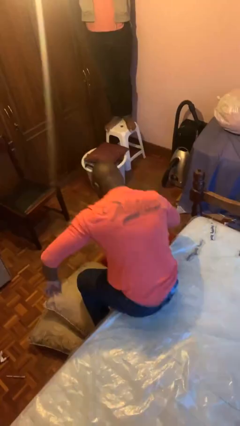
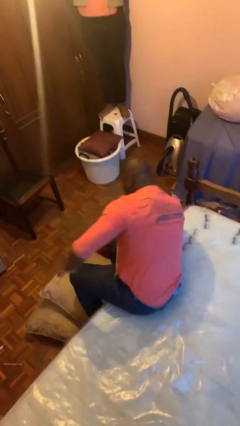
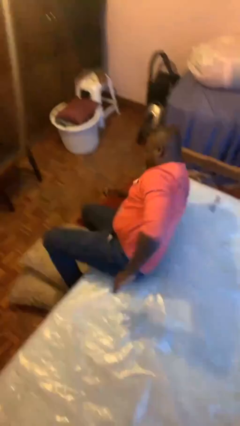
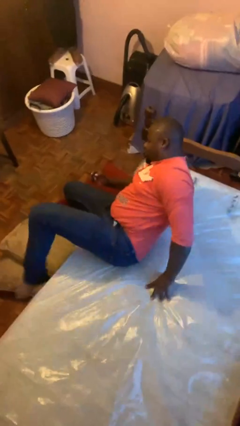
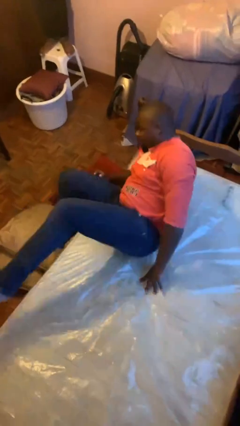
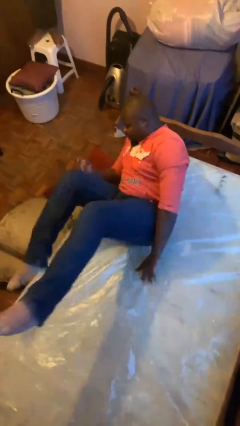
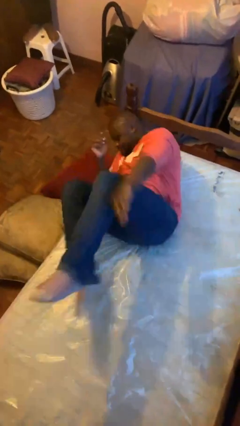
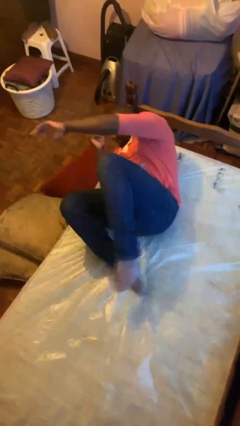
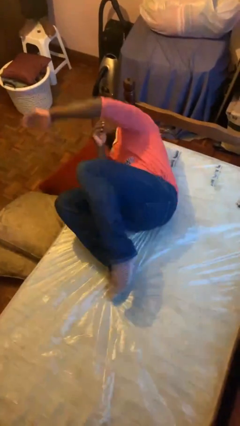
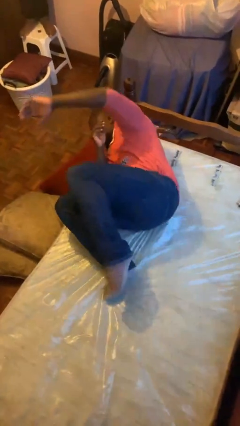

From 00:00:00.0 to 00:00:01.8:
person lies down on bed

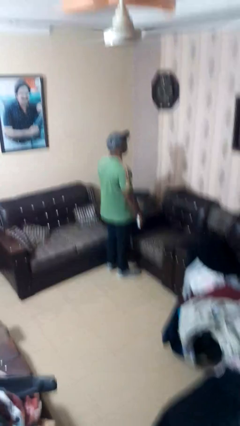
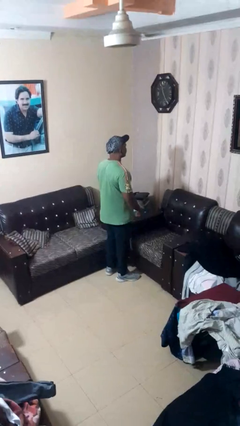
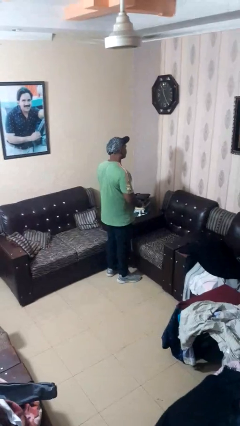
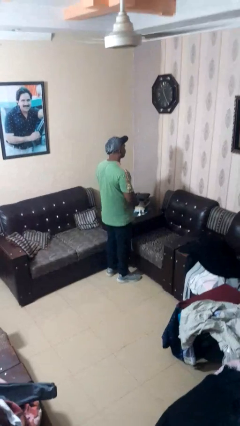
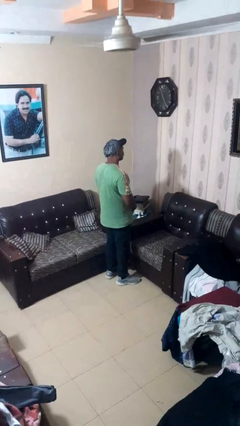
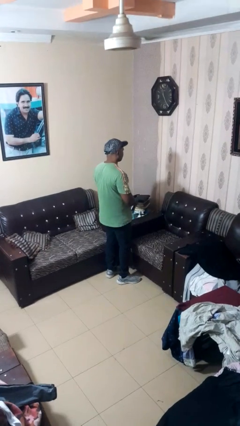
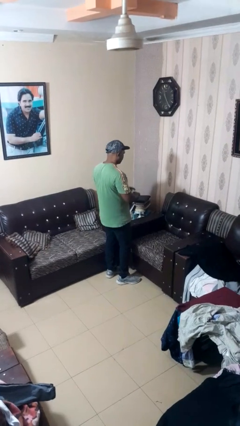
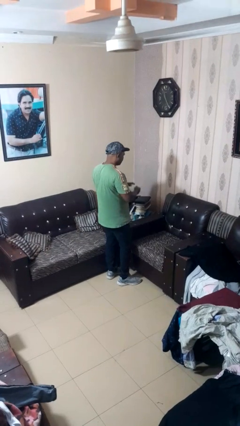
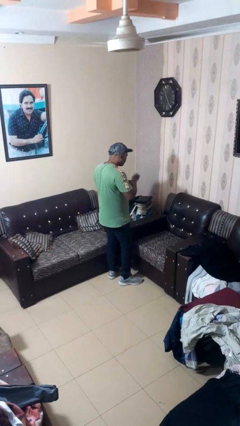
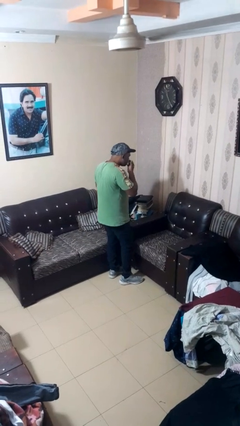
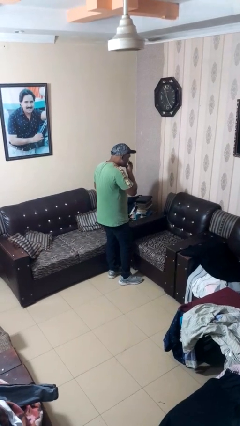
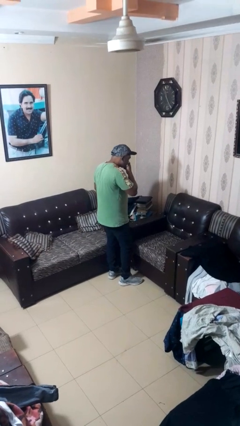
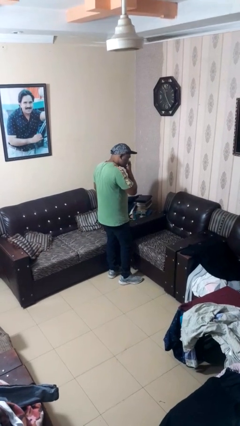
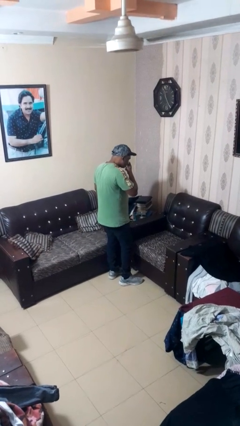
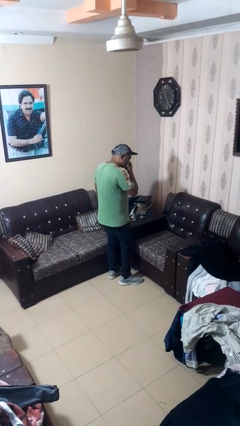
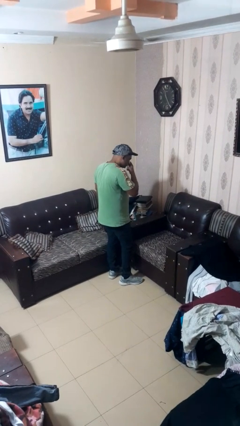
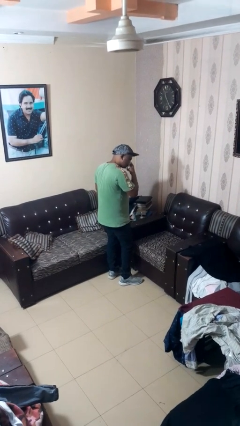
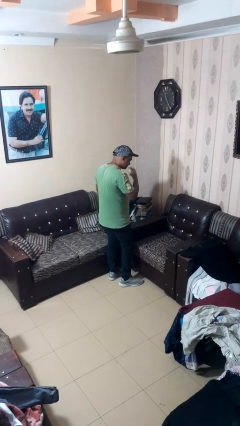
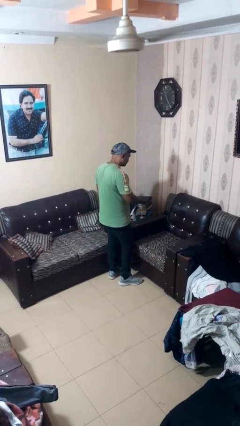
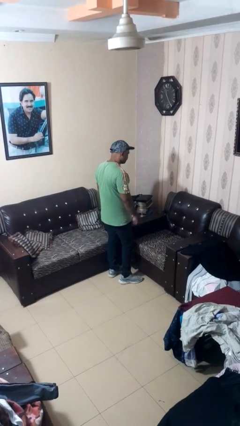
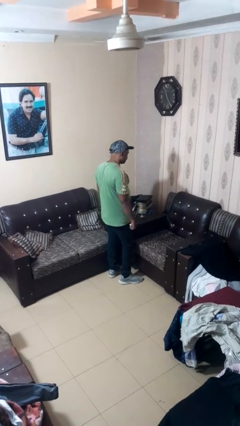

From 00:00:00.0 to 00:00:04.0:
person blows nose

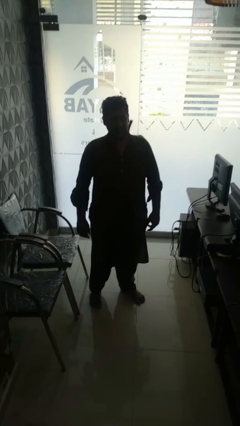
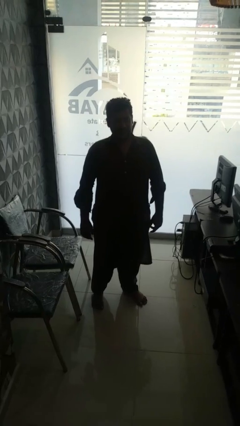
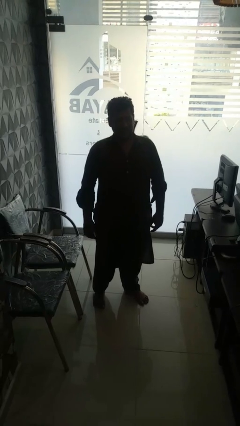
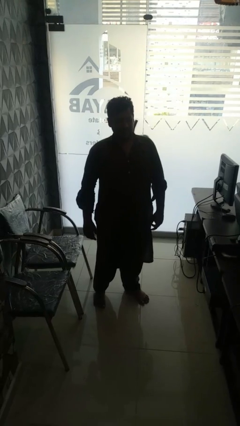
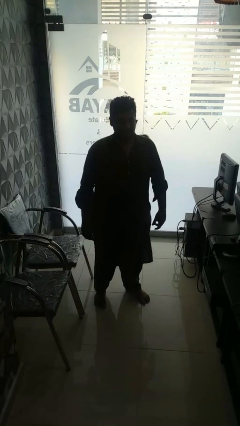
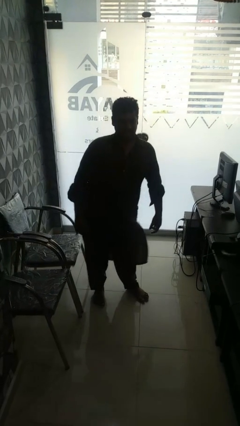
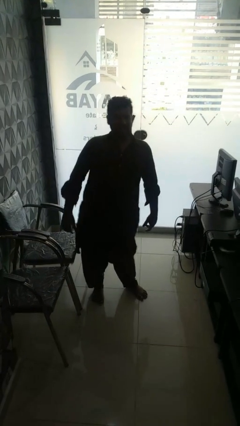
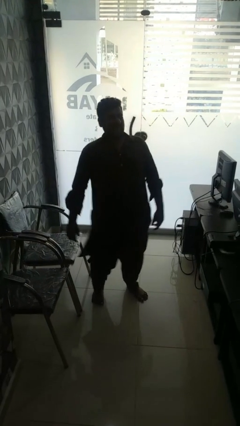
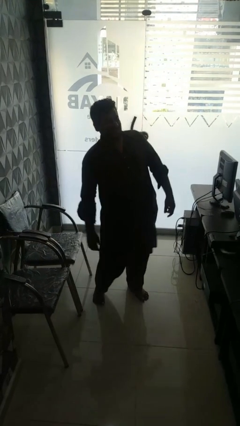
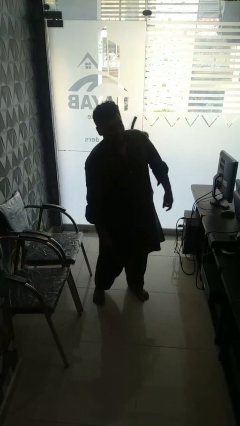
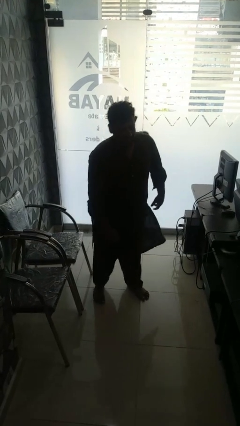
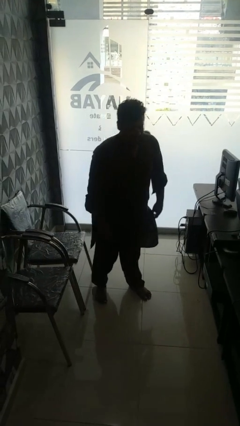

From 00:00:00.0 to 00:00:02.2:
person wiggles hips

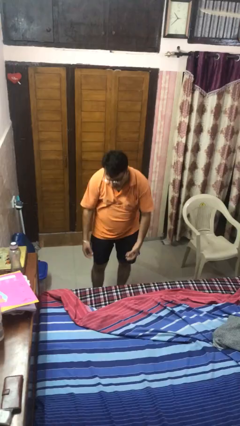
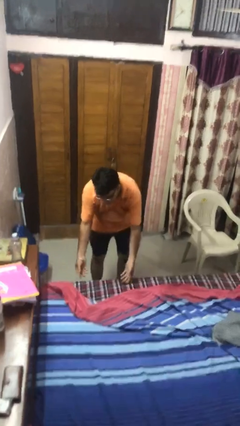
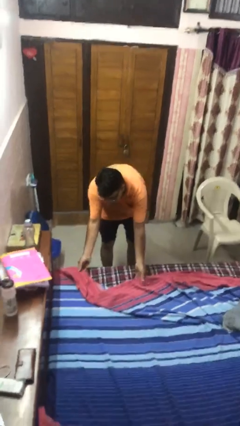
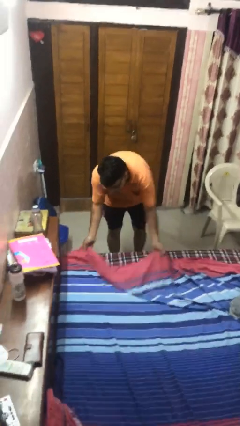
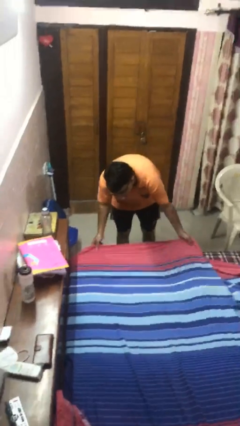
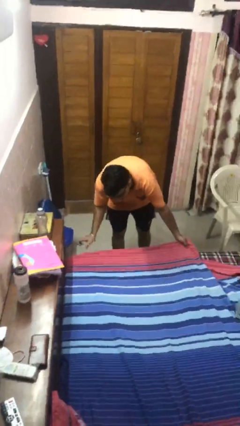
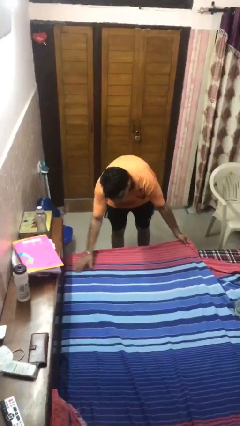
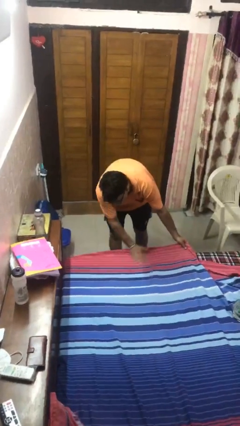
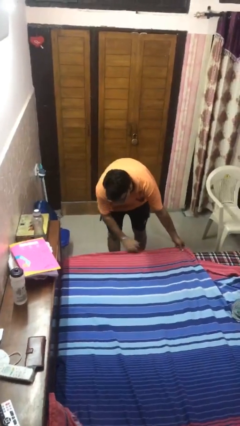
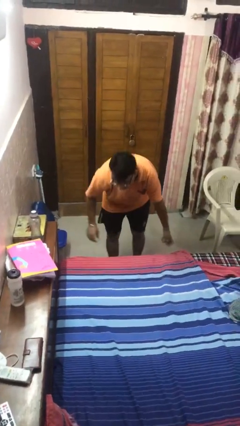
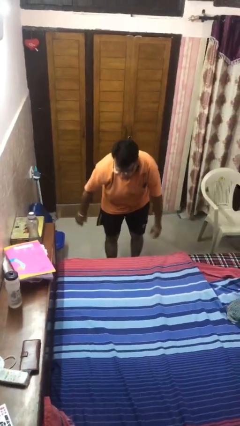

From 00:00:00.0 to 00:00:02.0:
person makes bed

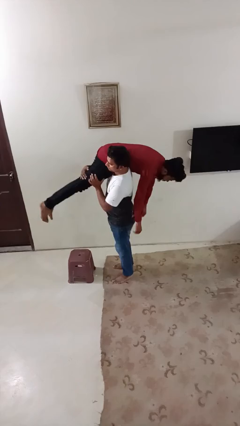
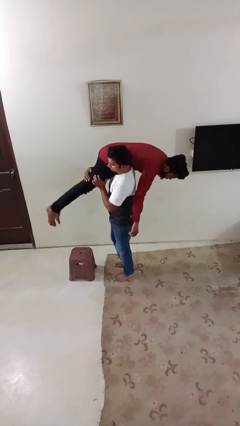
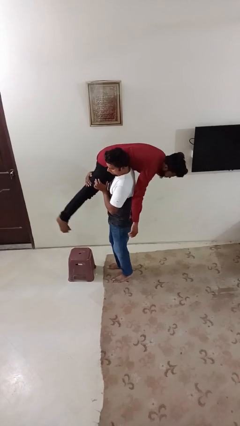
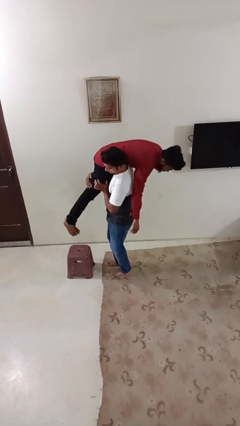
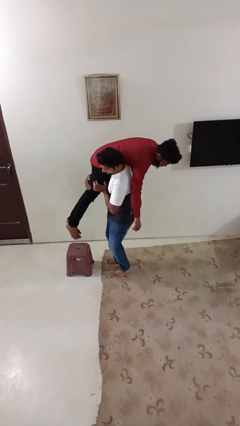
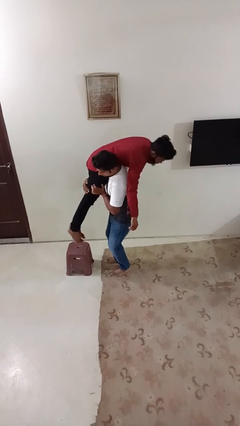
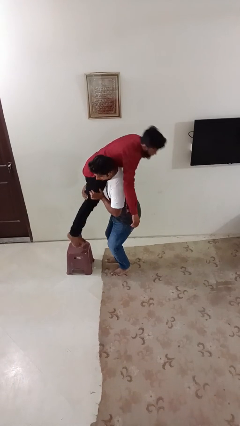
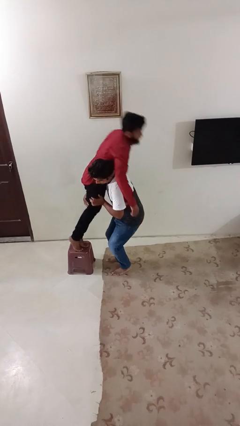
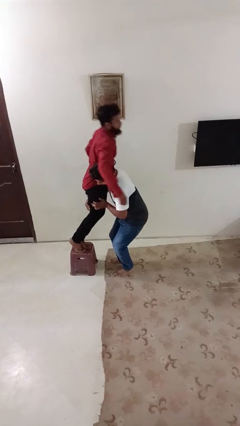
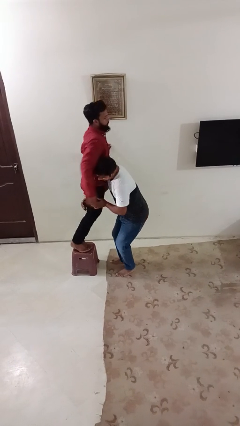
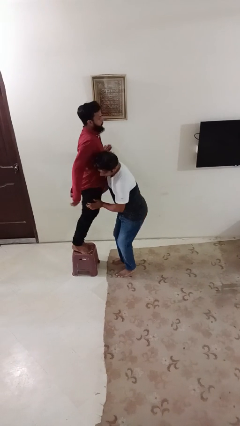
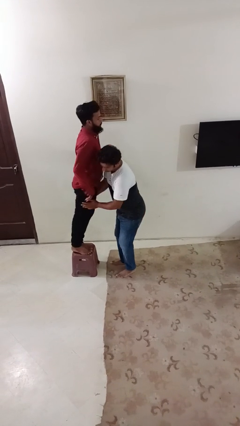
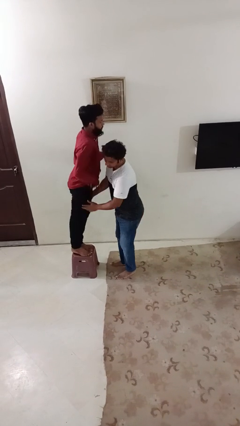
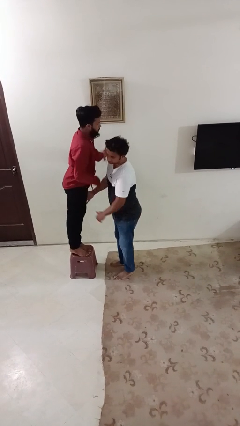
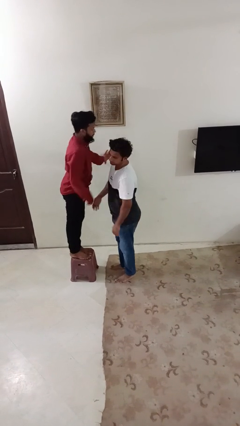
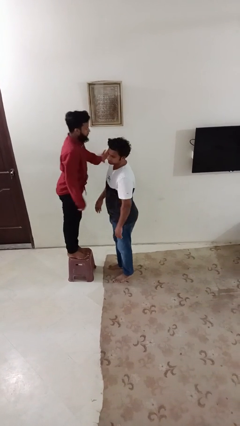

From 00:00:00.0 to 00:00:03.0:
person puts down person

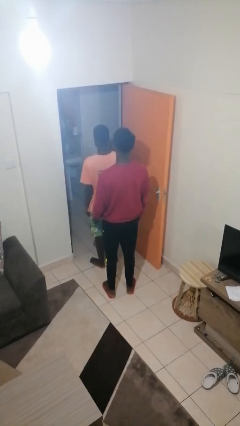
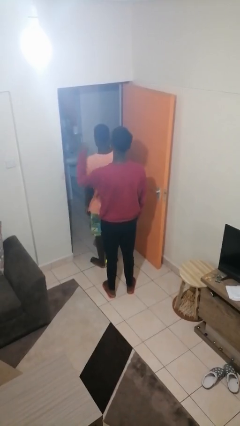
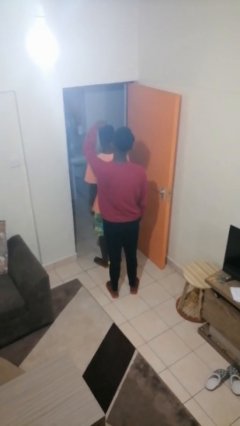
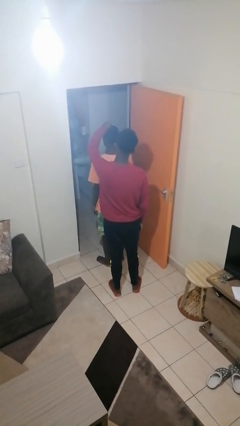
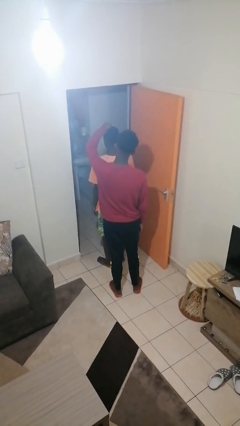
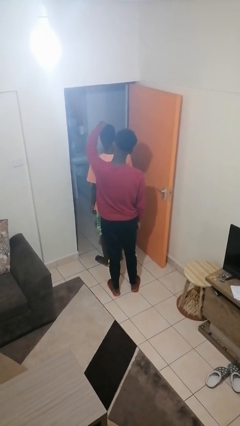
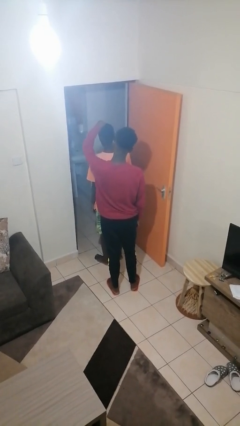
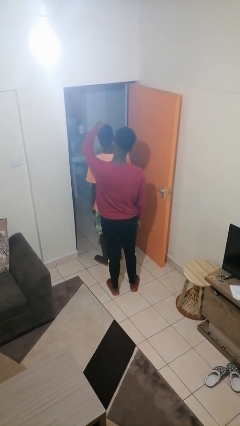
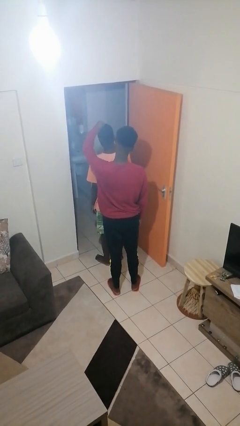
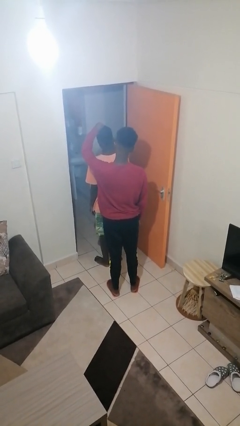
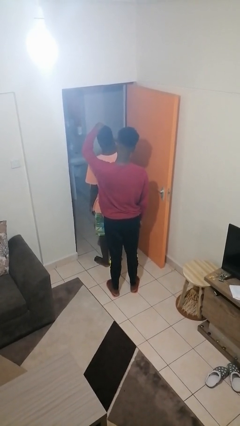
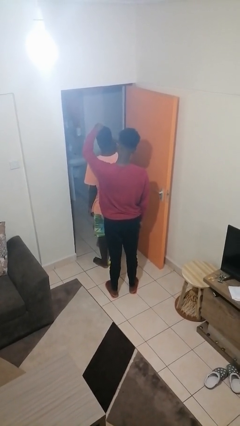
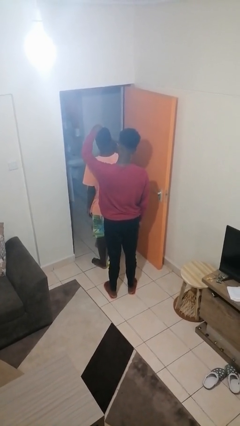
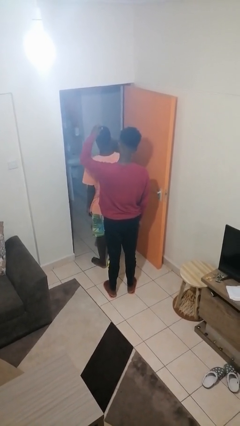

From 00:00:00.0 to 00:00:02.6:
person grabs person by hair

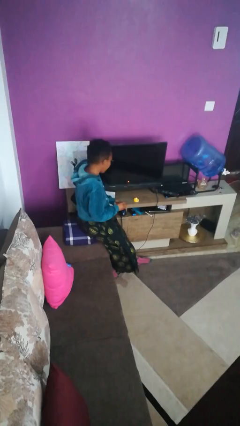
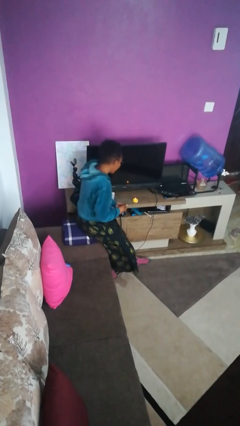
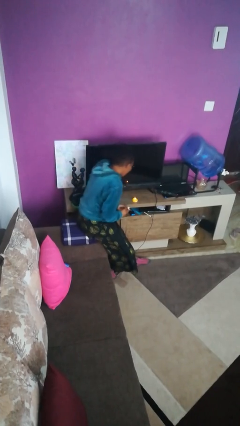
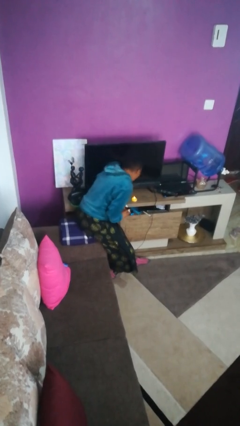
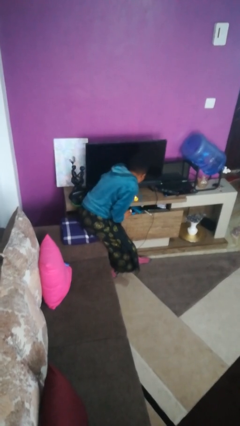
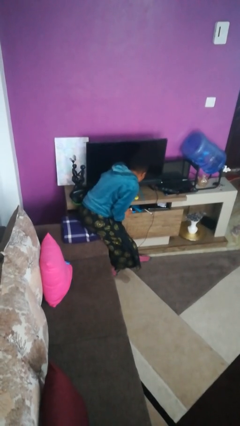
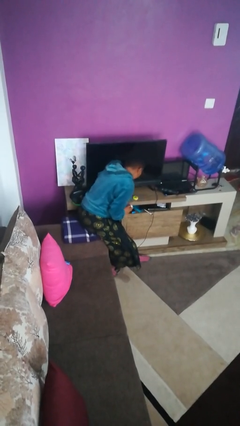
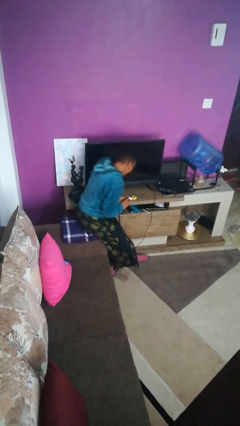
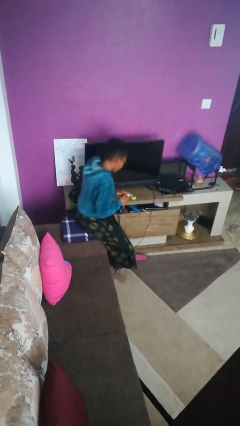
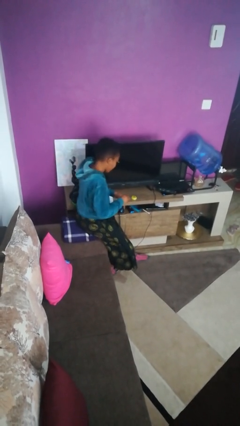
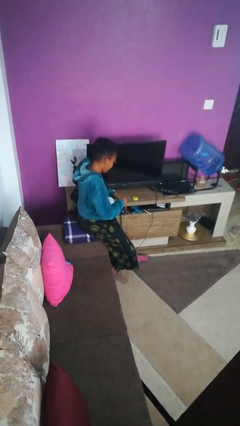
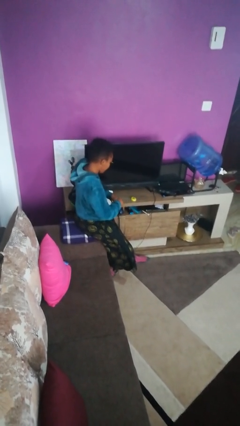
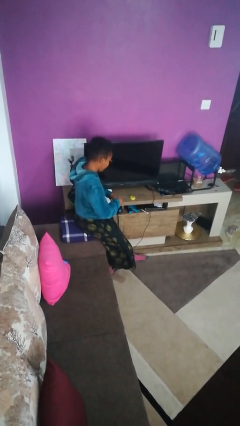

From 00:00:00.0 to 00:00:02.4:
person extinguishes candle
